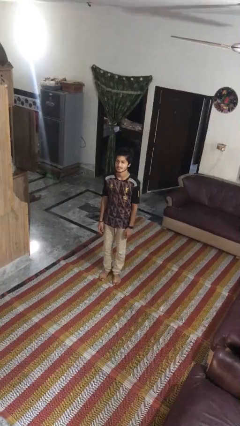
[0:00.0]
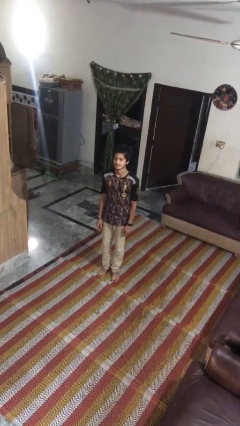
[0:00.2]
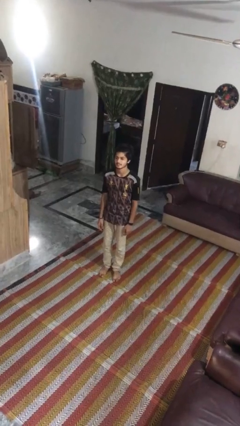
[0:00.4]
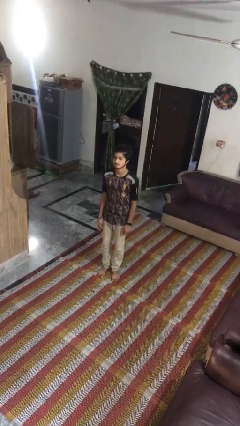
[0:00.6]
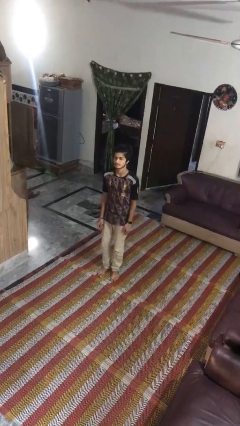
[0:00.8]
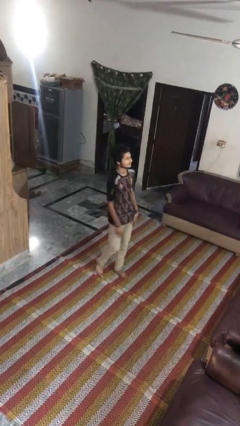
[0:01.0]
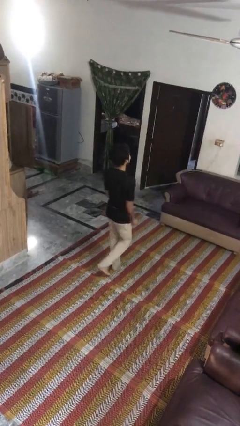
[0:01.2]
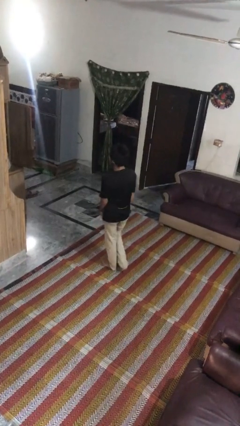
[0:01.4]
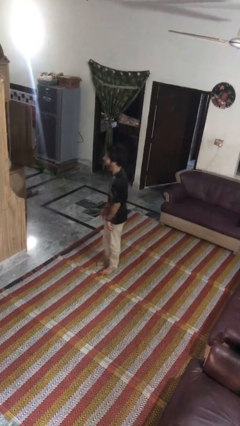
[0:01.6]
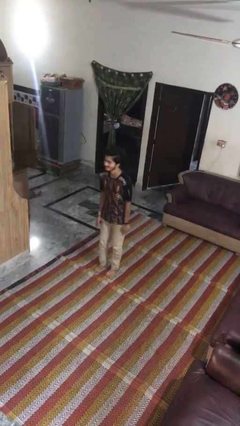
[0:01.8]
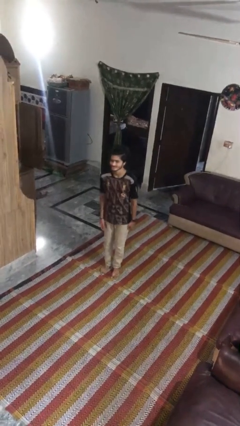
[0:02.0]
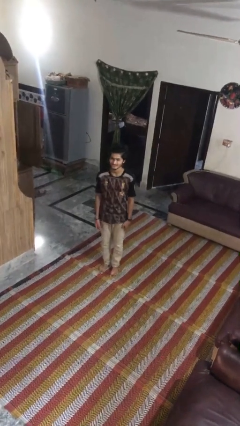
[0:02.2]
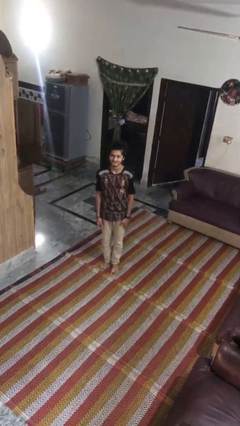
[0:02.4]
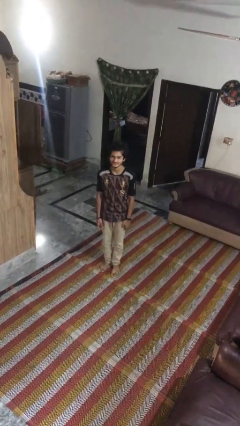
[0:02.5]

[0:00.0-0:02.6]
person twirls

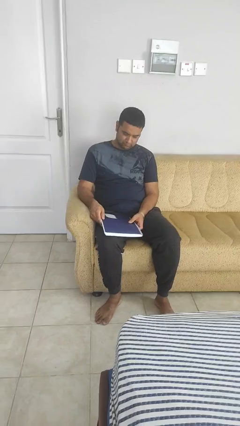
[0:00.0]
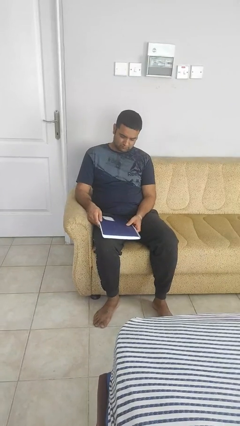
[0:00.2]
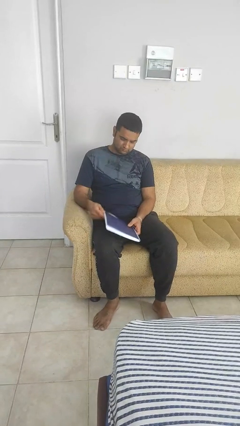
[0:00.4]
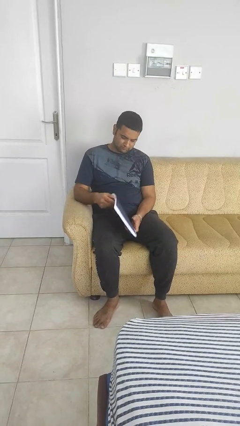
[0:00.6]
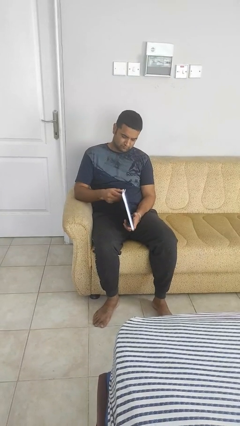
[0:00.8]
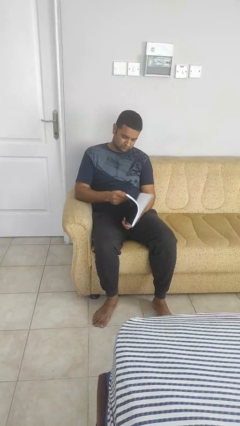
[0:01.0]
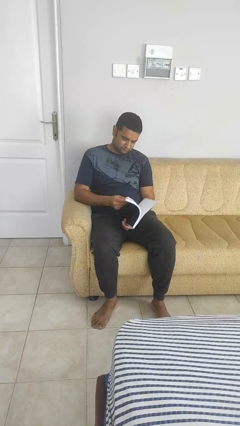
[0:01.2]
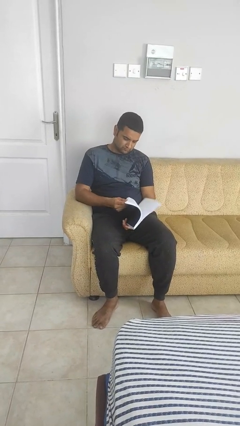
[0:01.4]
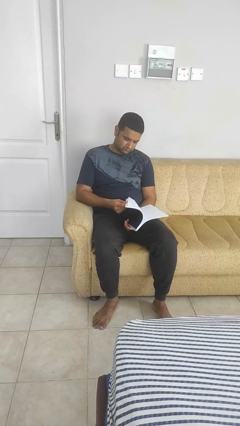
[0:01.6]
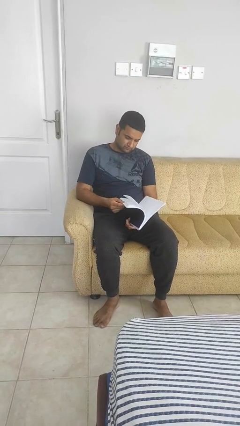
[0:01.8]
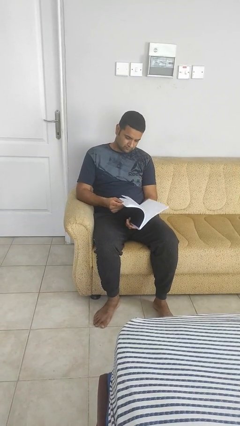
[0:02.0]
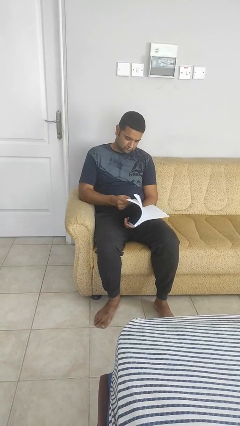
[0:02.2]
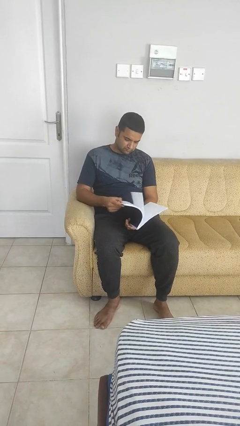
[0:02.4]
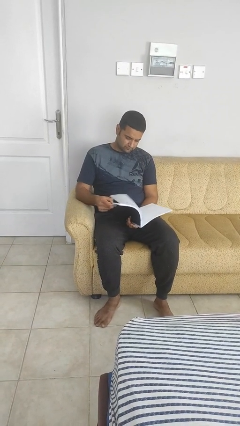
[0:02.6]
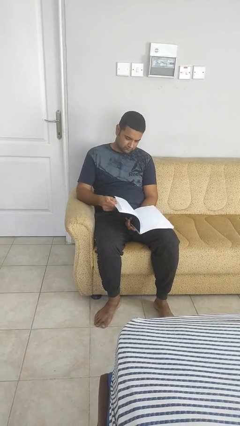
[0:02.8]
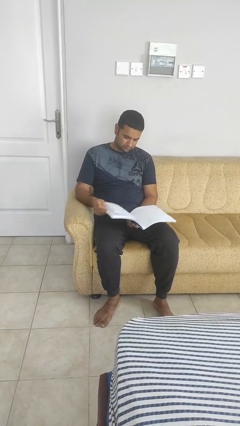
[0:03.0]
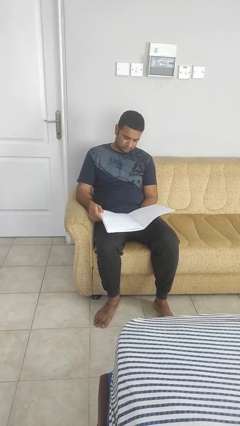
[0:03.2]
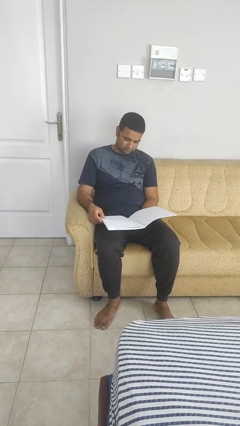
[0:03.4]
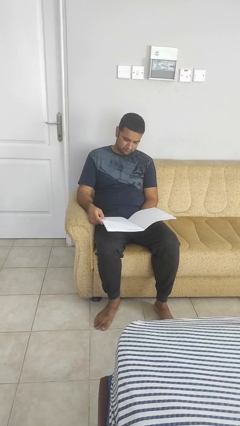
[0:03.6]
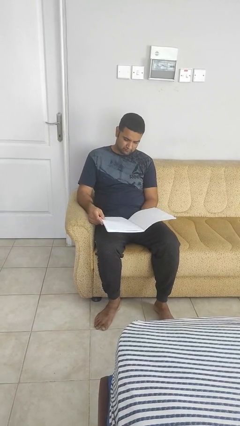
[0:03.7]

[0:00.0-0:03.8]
person reads book

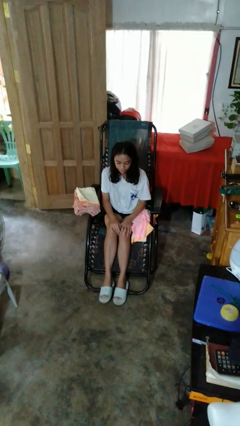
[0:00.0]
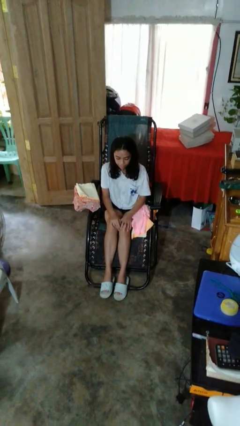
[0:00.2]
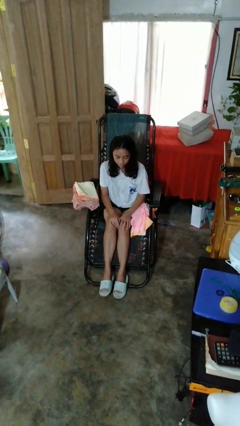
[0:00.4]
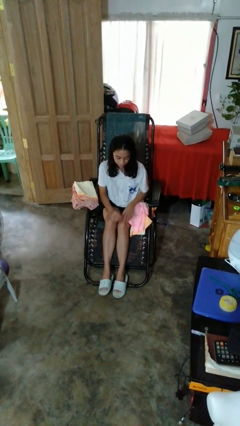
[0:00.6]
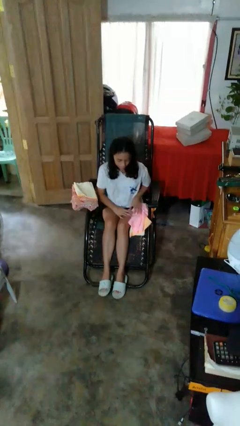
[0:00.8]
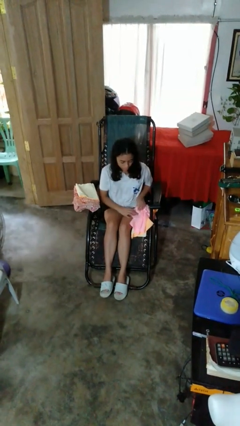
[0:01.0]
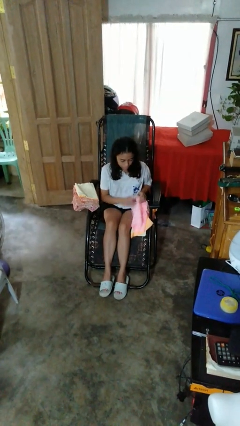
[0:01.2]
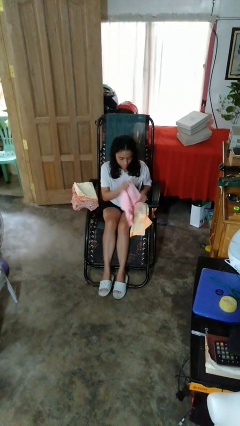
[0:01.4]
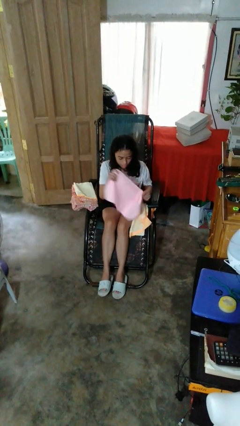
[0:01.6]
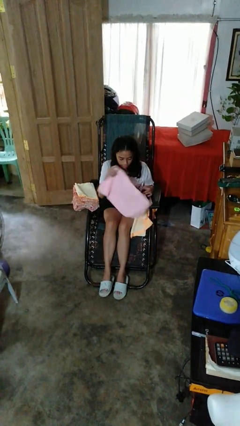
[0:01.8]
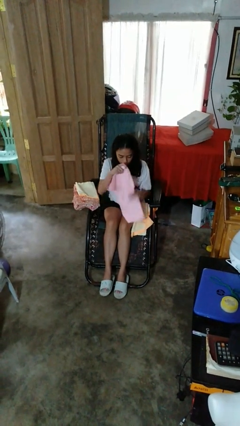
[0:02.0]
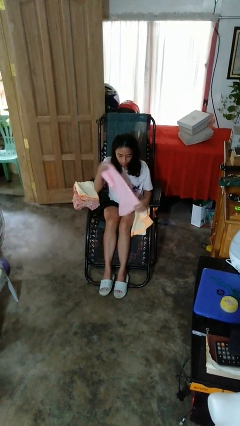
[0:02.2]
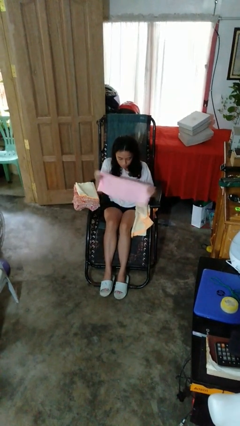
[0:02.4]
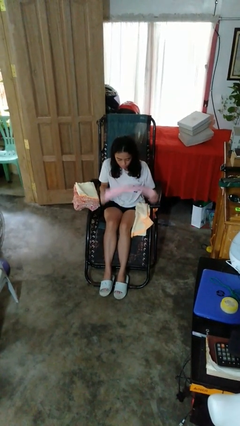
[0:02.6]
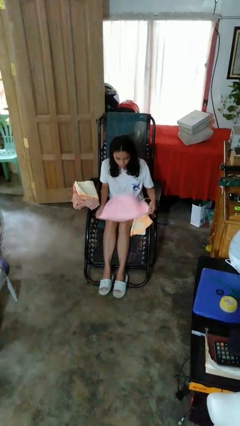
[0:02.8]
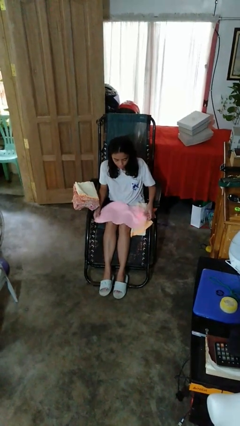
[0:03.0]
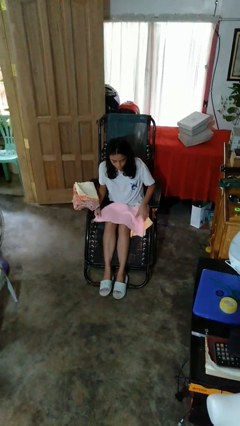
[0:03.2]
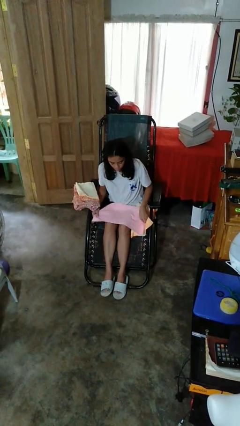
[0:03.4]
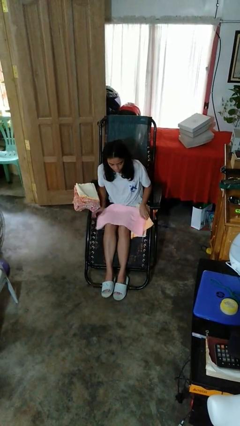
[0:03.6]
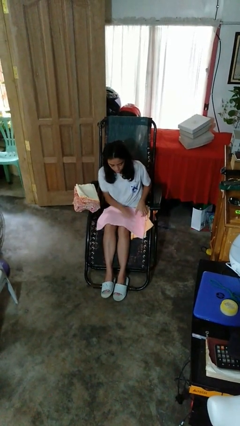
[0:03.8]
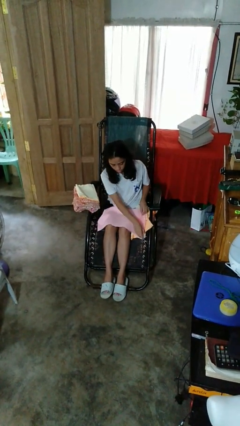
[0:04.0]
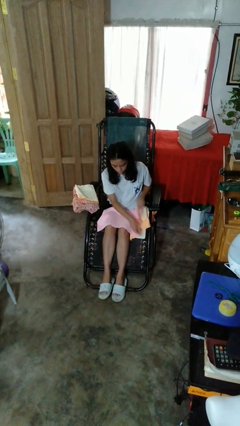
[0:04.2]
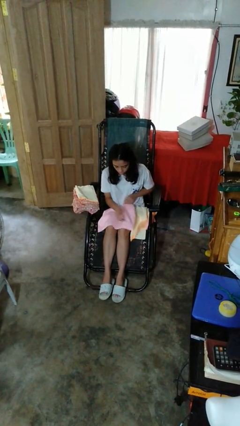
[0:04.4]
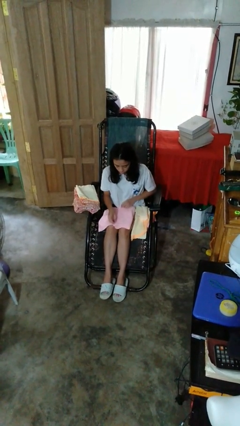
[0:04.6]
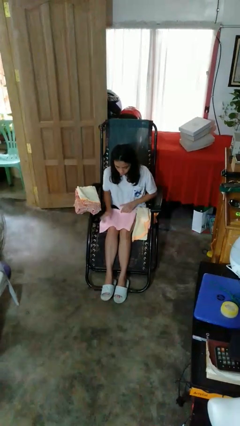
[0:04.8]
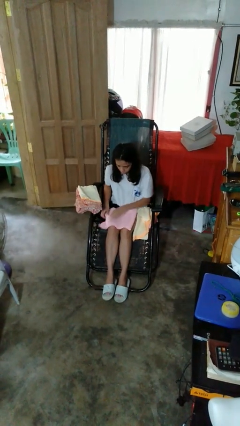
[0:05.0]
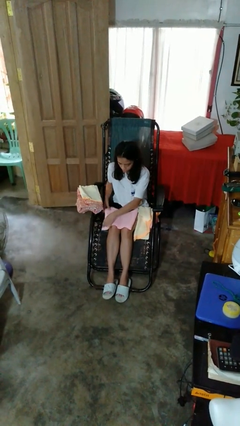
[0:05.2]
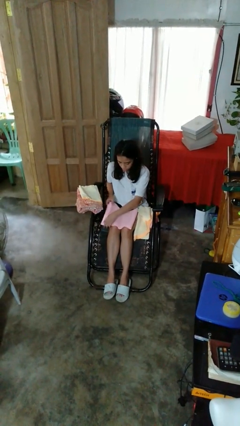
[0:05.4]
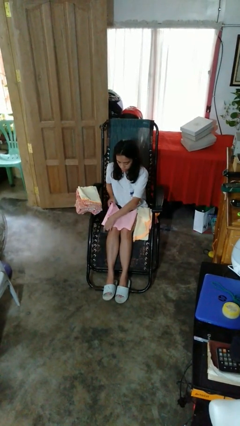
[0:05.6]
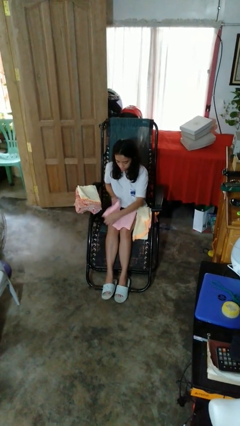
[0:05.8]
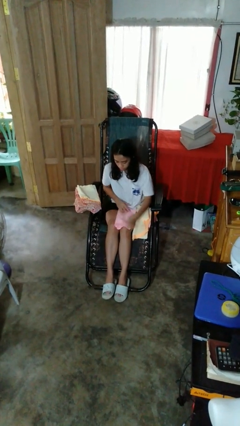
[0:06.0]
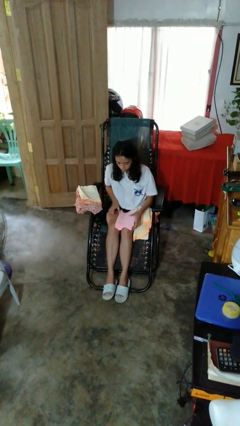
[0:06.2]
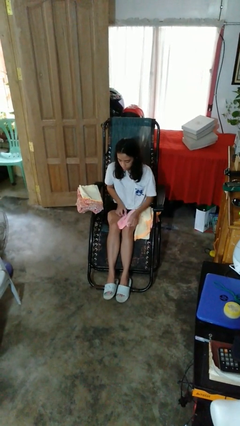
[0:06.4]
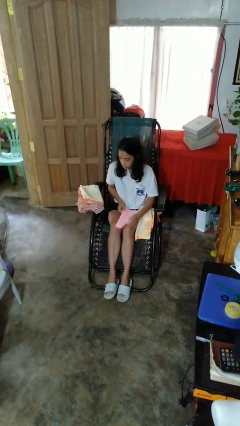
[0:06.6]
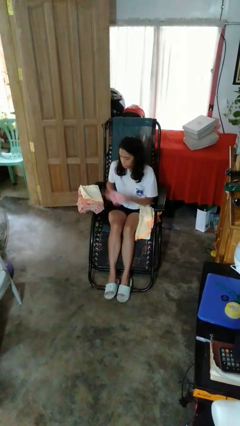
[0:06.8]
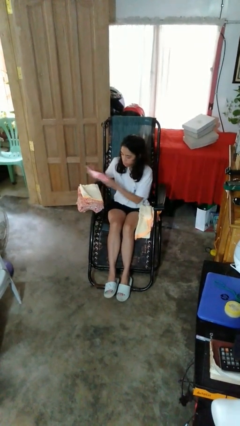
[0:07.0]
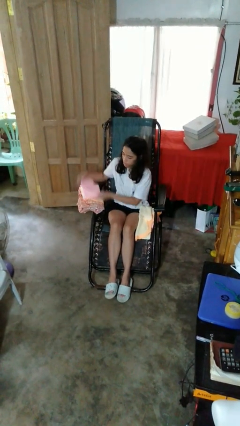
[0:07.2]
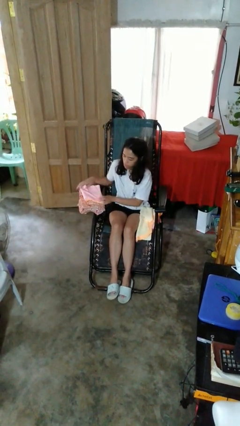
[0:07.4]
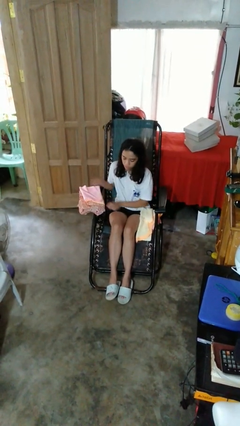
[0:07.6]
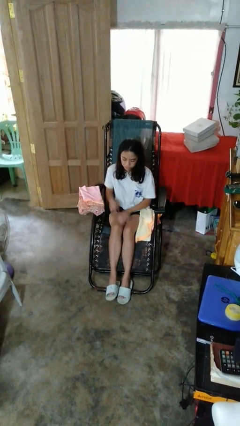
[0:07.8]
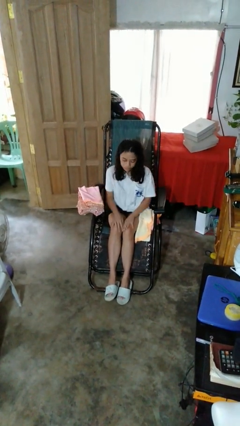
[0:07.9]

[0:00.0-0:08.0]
person folds towel

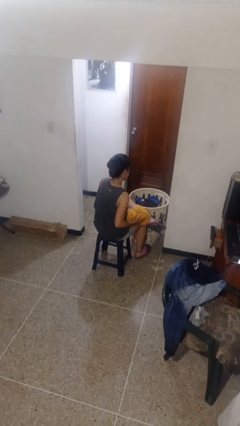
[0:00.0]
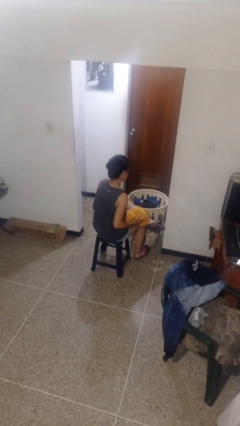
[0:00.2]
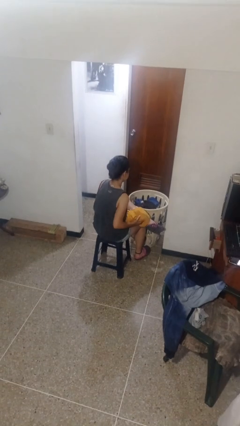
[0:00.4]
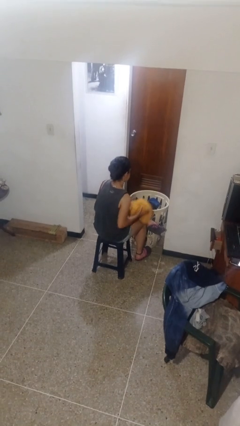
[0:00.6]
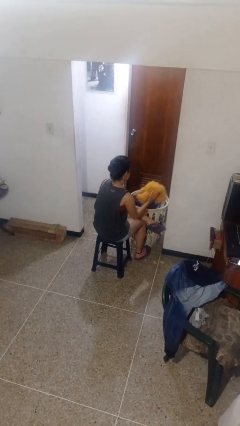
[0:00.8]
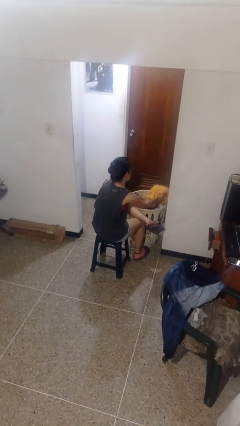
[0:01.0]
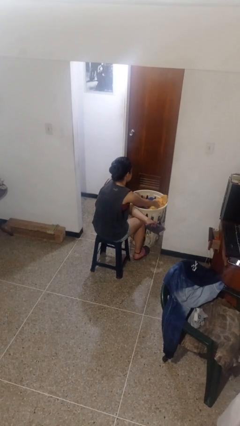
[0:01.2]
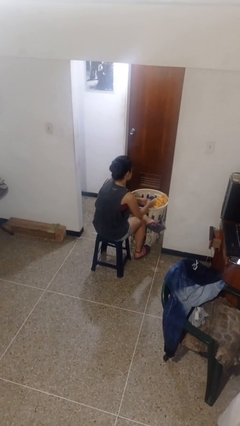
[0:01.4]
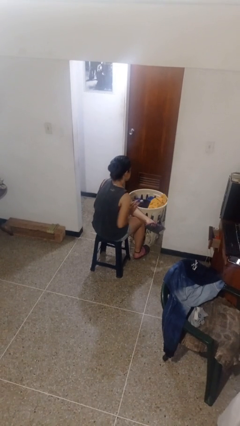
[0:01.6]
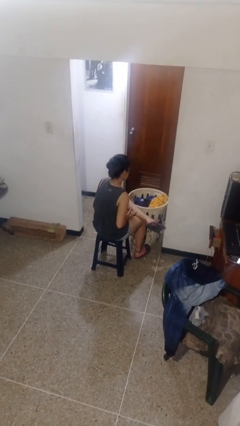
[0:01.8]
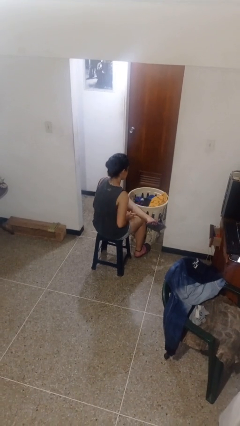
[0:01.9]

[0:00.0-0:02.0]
person puts object into basket

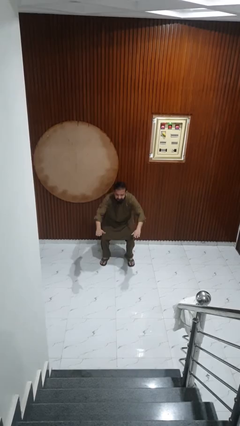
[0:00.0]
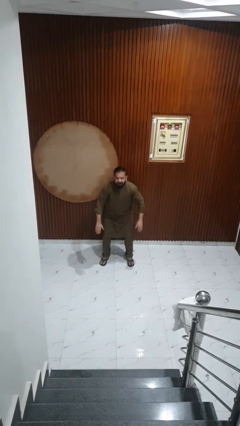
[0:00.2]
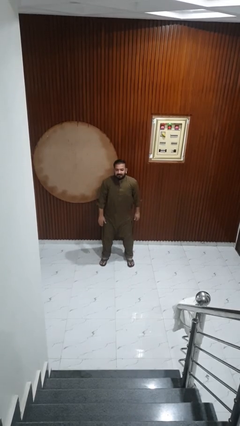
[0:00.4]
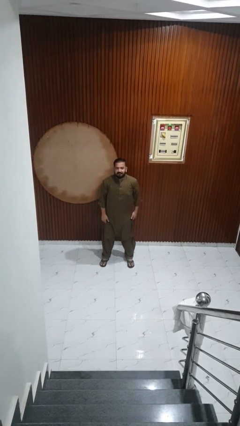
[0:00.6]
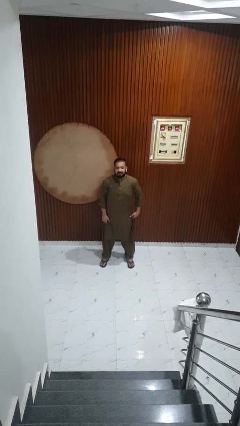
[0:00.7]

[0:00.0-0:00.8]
person stands up

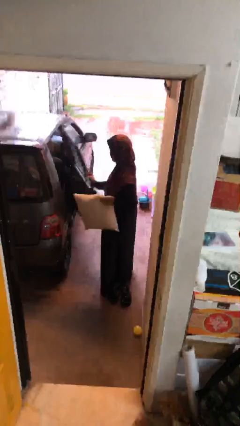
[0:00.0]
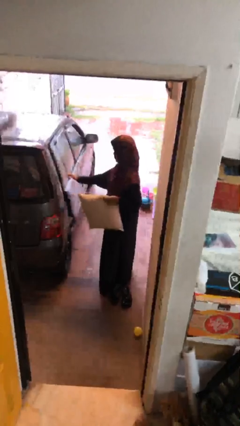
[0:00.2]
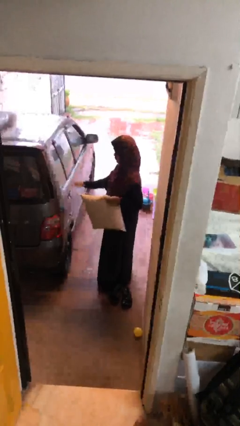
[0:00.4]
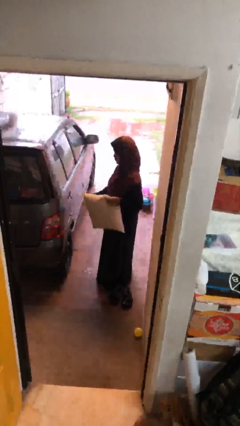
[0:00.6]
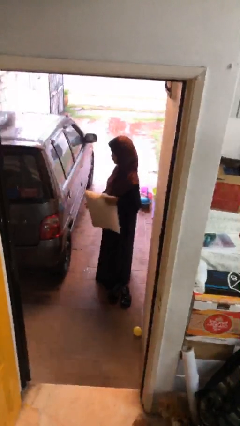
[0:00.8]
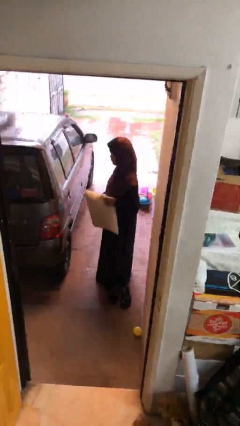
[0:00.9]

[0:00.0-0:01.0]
person closes car door
